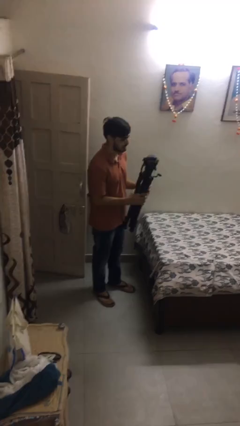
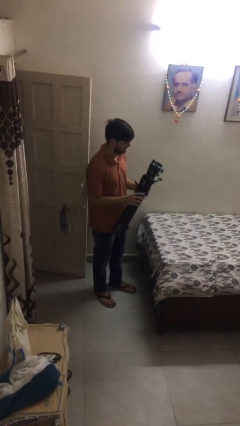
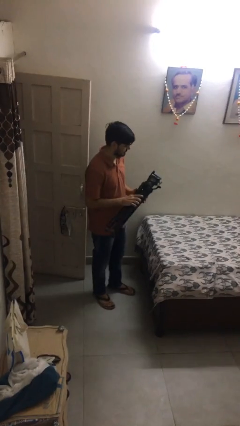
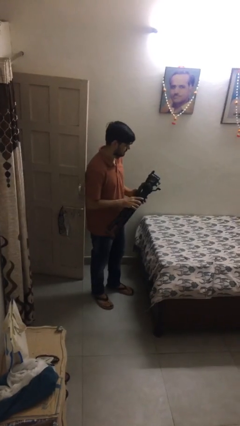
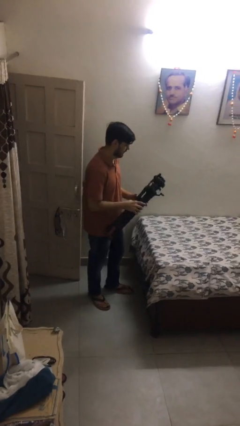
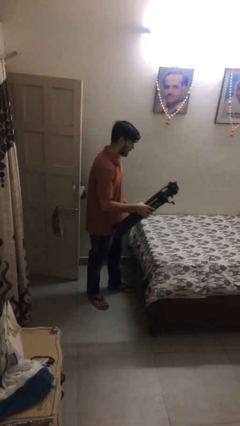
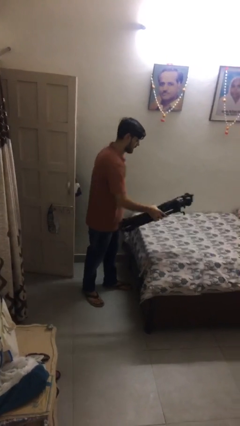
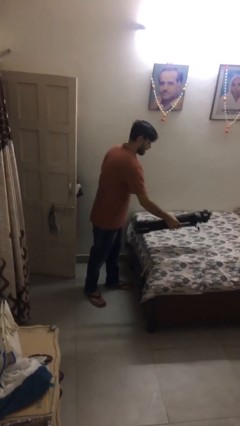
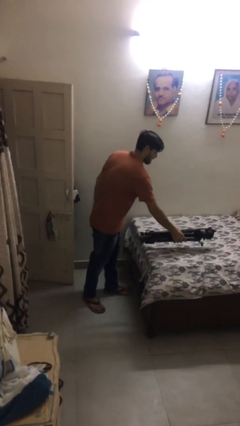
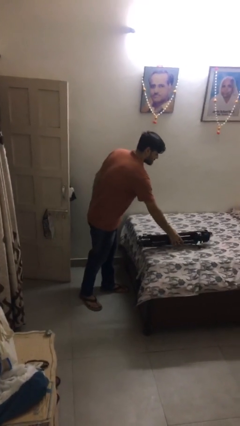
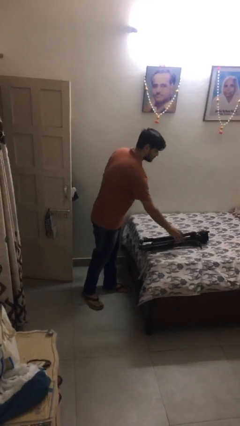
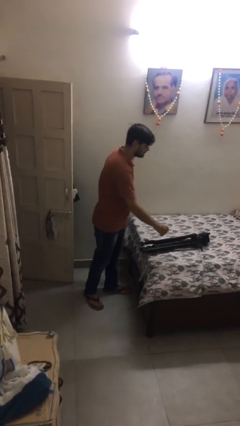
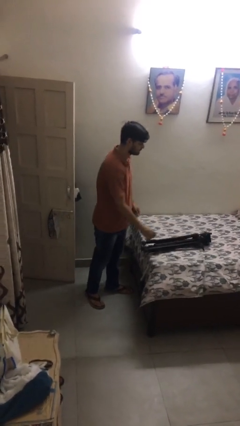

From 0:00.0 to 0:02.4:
person puts down object on bed

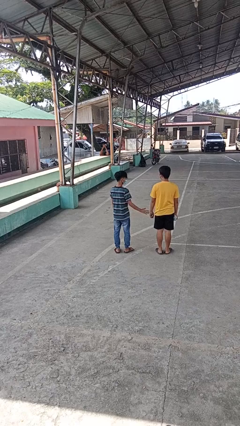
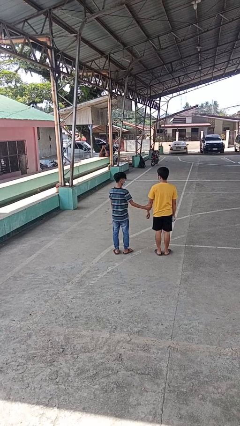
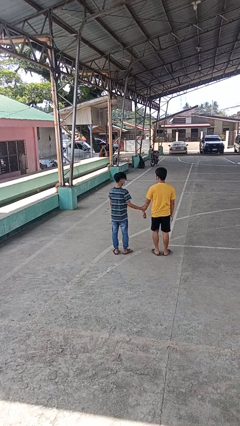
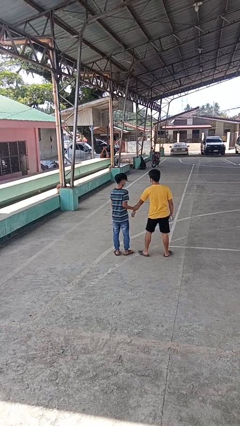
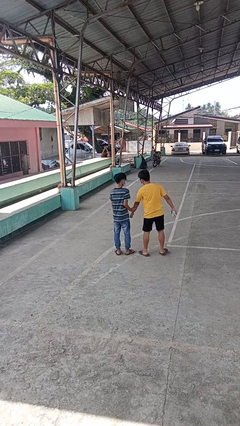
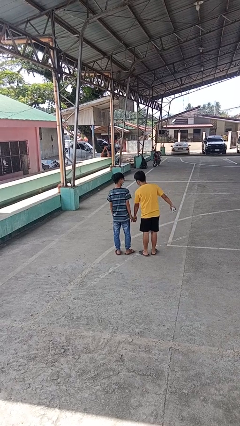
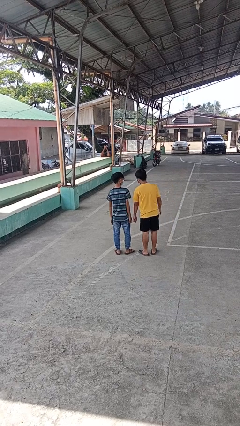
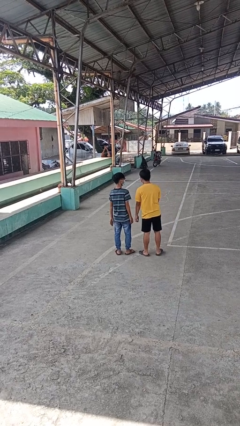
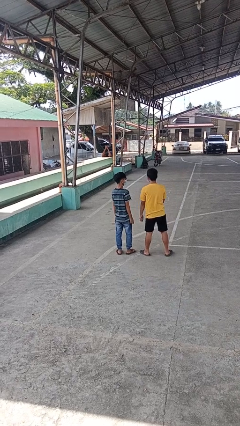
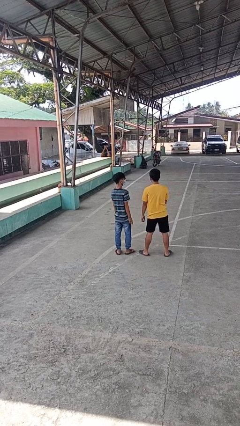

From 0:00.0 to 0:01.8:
person grabs person by forearm

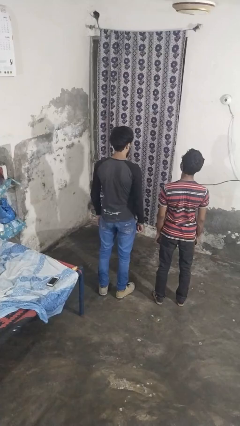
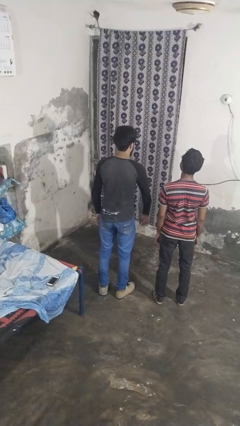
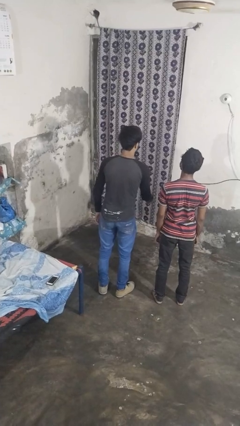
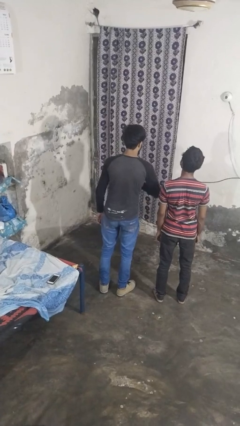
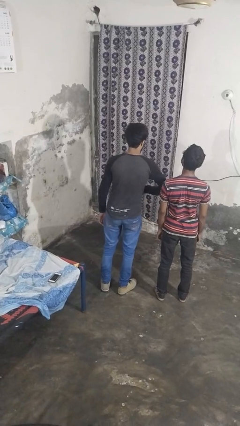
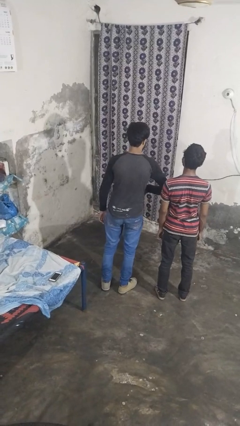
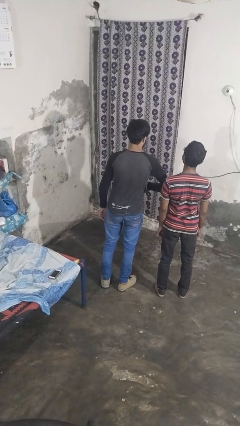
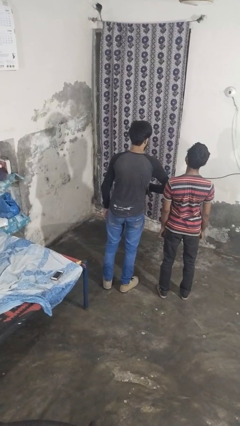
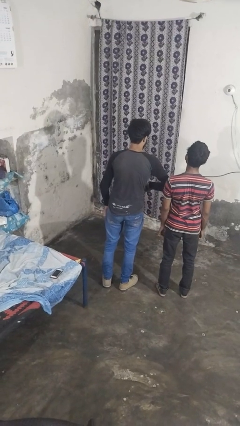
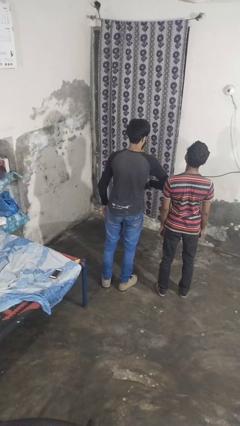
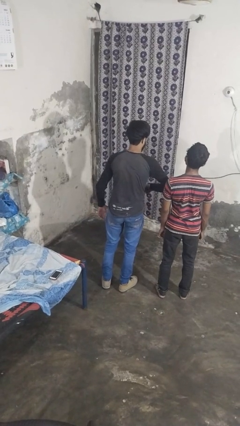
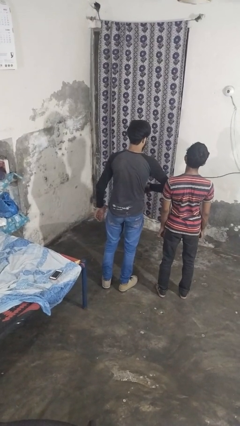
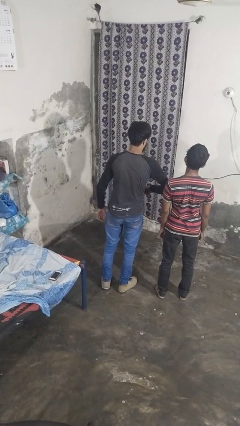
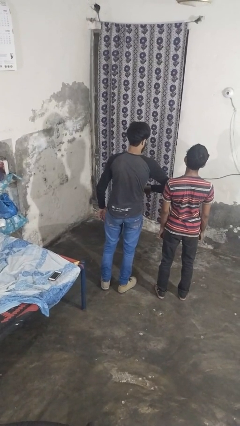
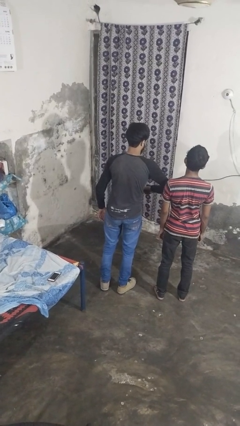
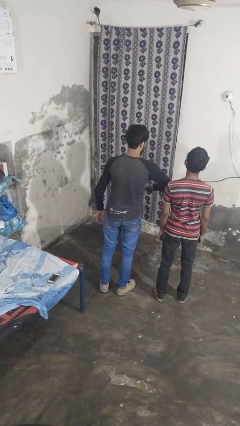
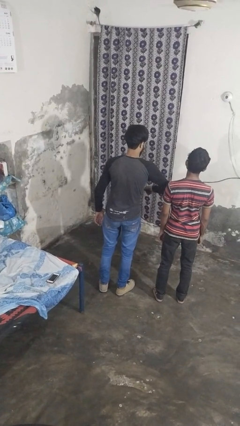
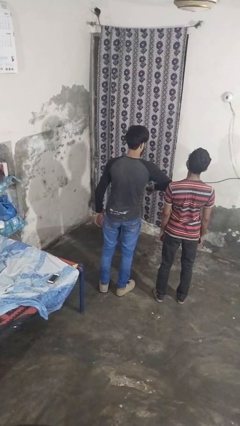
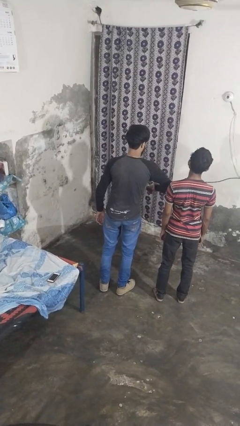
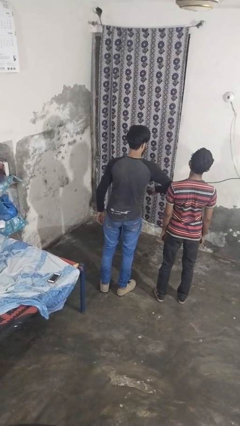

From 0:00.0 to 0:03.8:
person nudges person with elbow

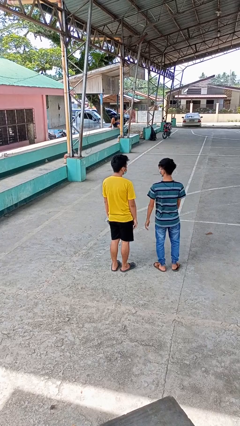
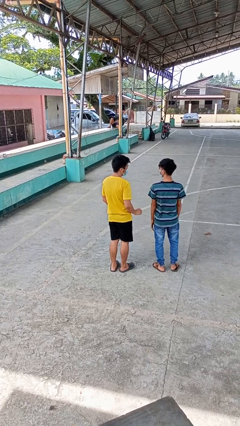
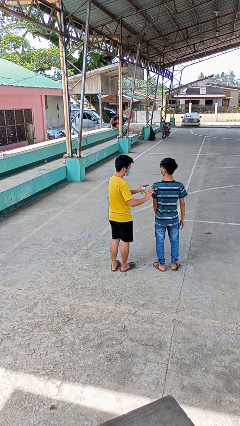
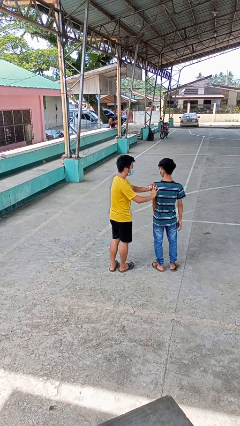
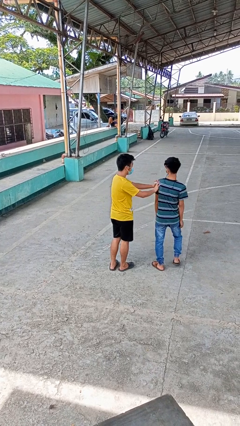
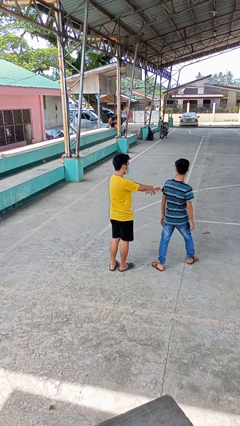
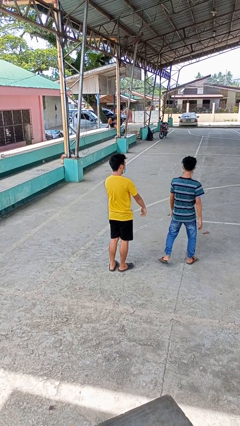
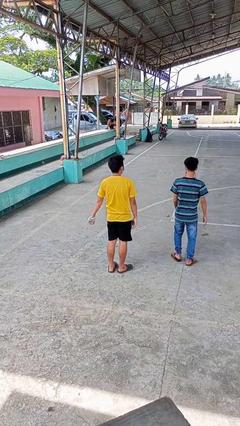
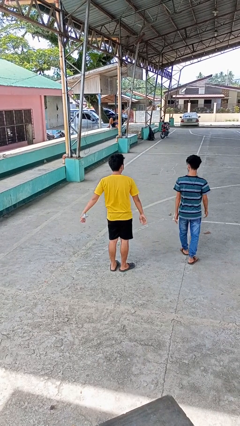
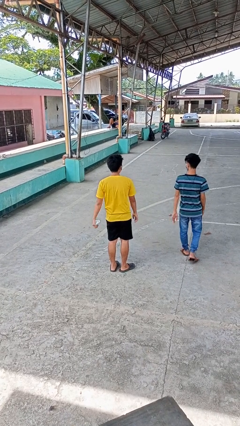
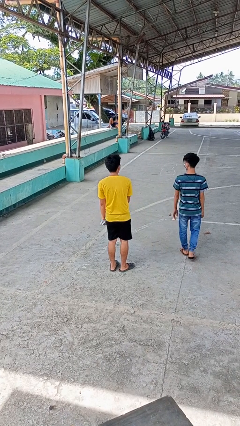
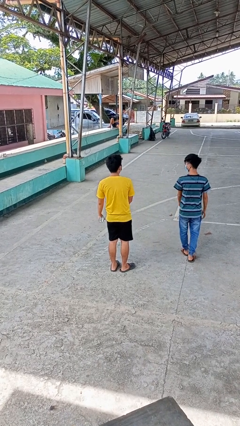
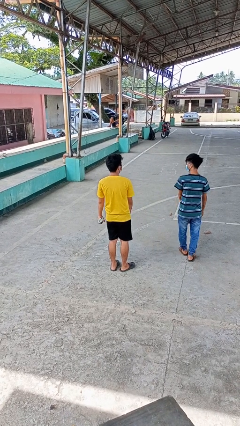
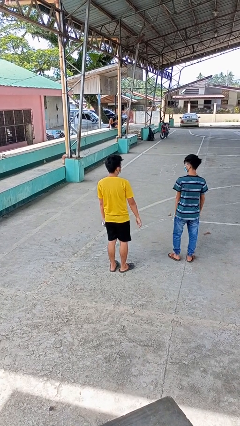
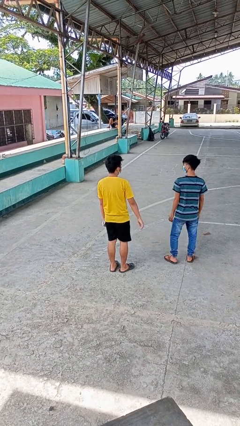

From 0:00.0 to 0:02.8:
person shoves person

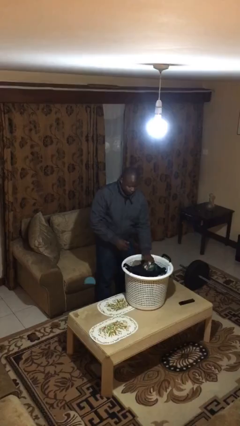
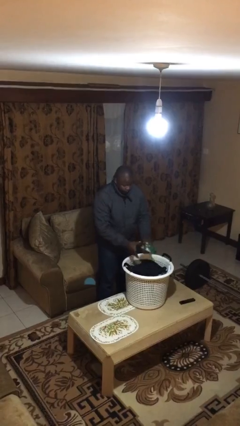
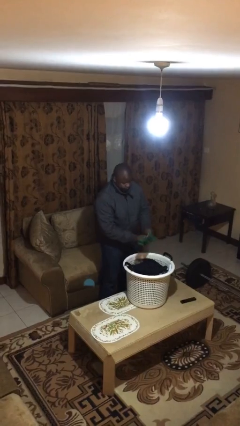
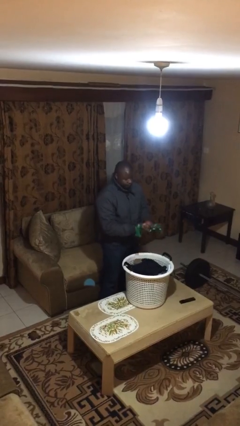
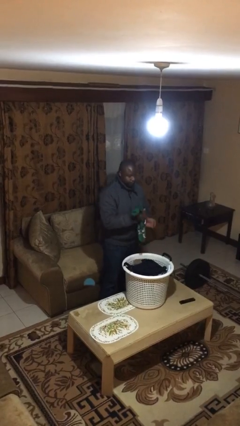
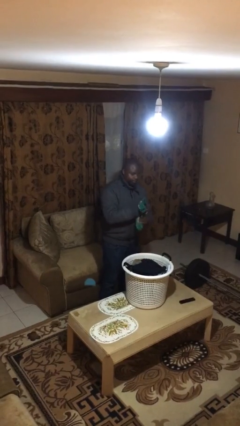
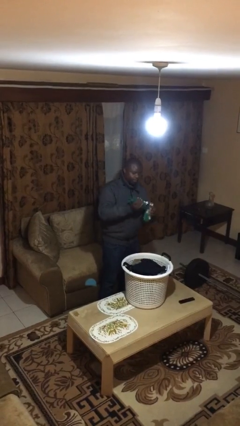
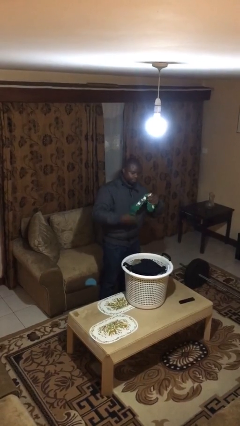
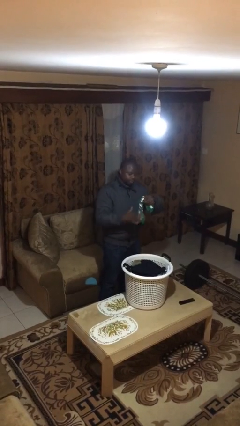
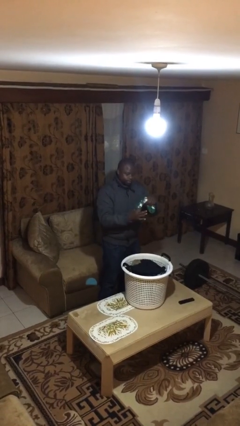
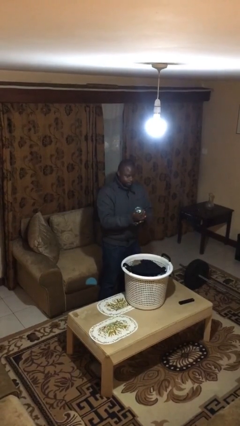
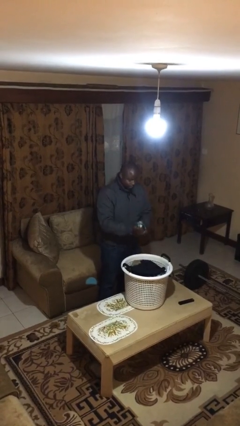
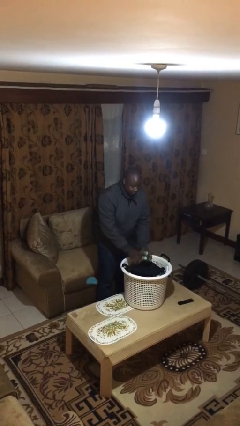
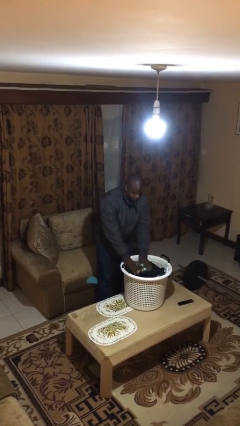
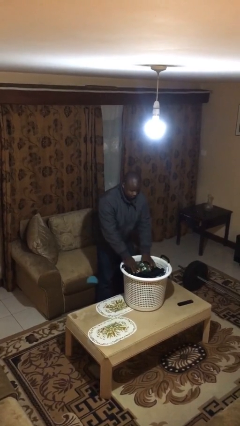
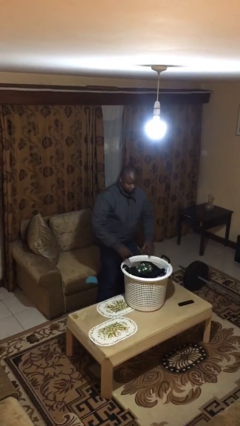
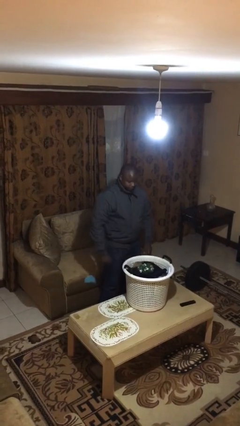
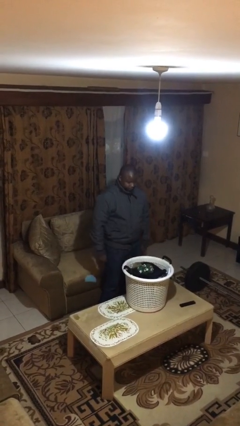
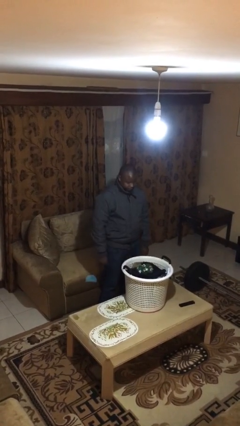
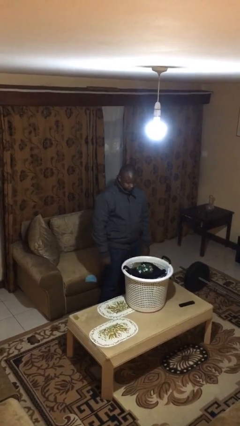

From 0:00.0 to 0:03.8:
person folds socks

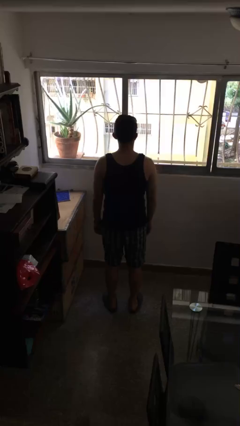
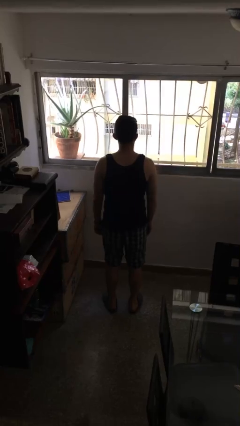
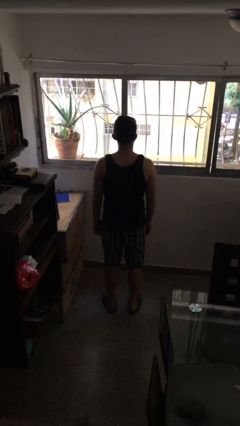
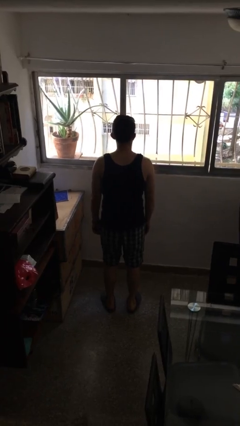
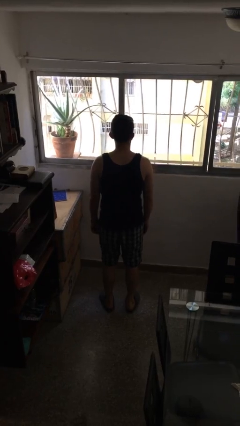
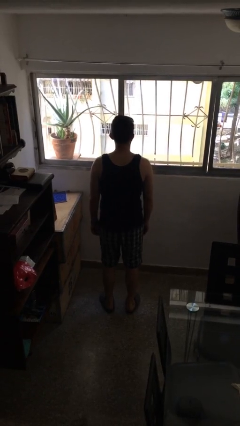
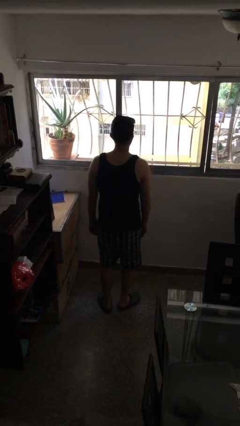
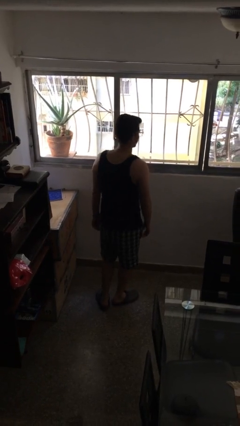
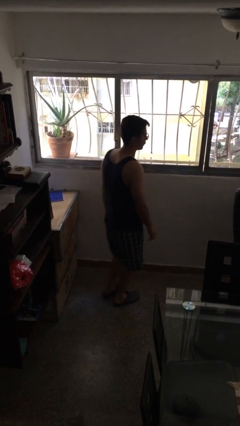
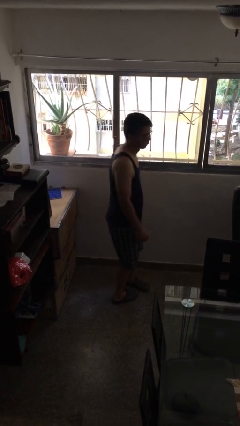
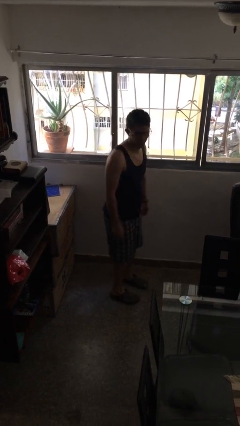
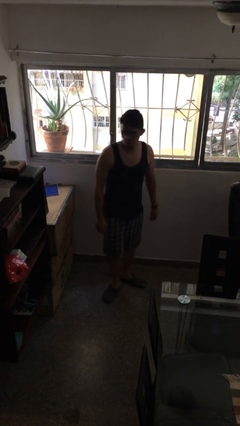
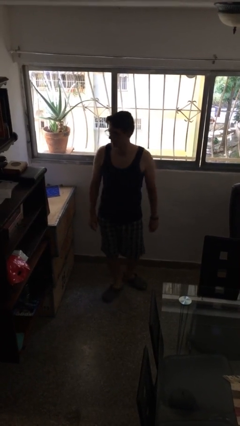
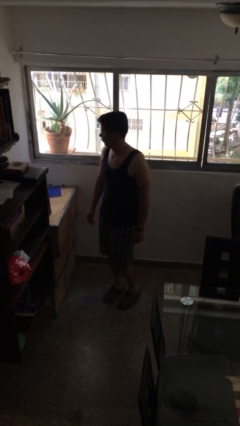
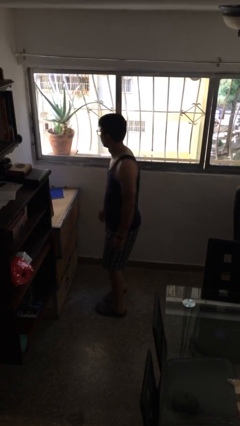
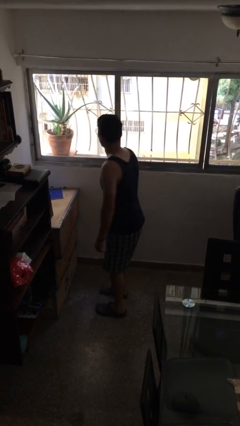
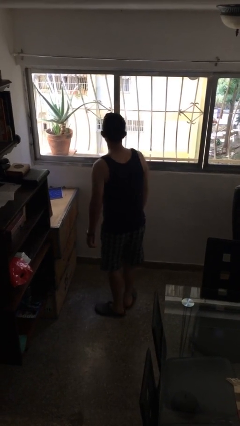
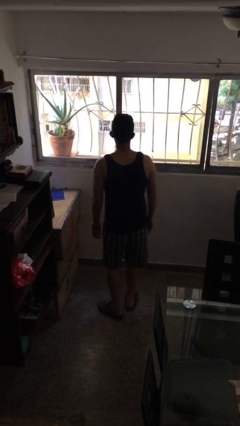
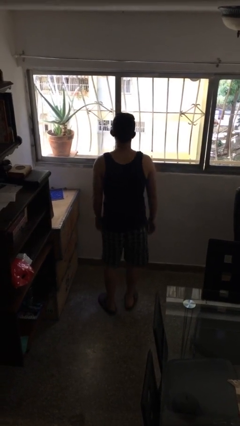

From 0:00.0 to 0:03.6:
person twirls
